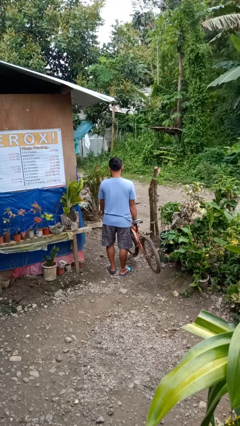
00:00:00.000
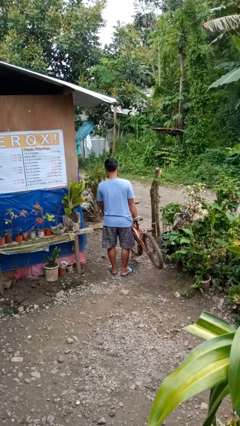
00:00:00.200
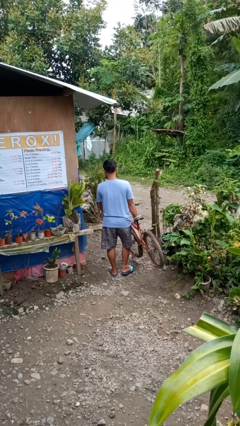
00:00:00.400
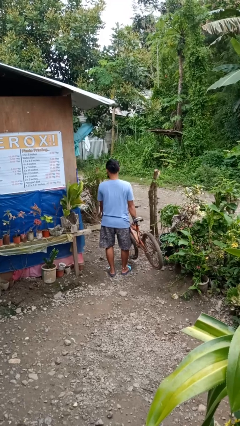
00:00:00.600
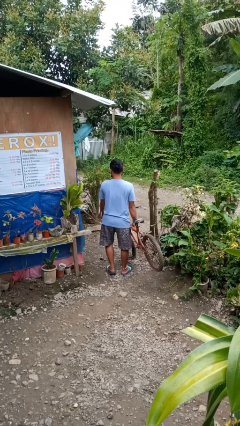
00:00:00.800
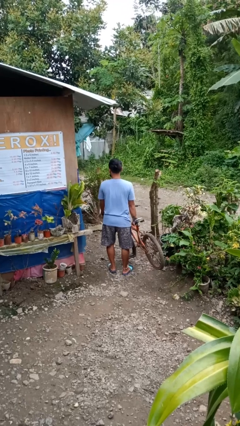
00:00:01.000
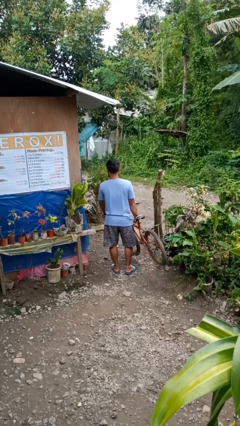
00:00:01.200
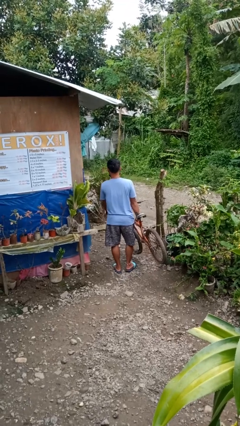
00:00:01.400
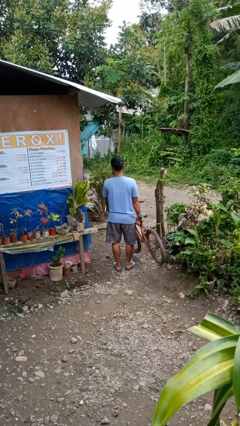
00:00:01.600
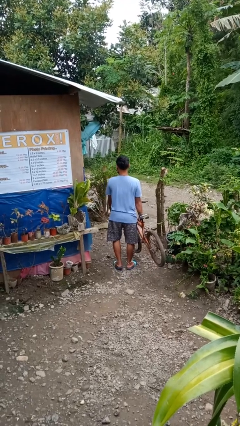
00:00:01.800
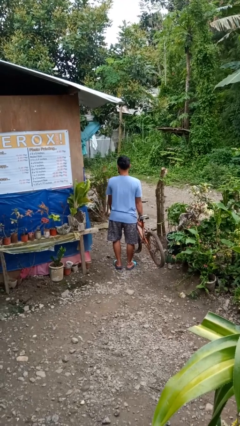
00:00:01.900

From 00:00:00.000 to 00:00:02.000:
person carries bicycle

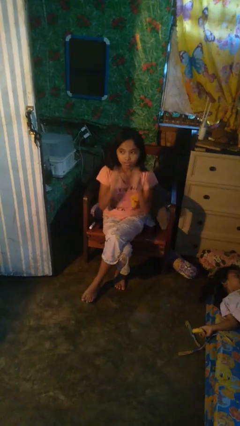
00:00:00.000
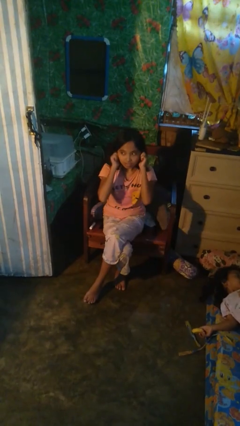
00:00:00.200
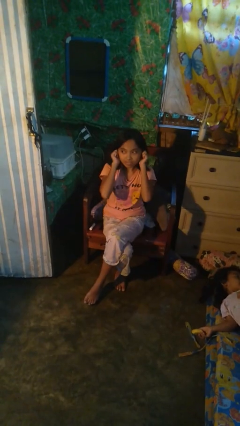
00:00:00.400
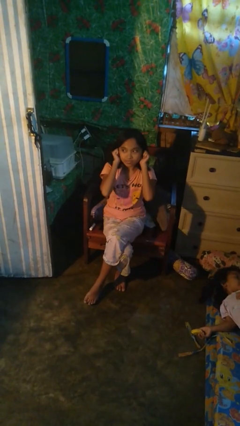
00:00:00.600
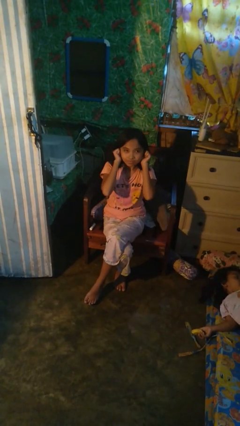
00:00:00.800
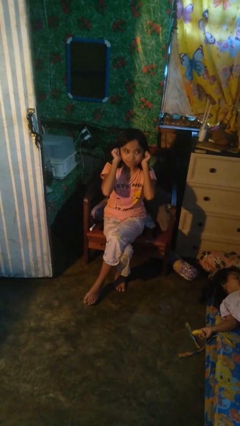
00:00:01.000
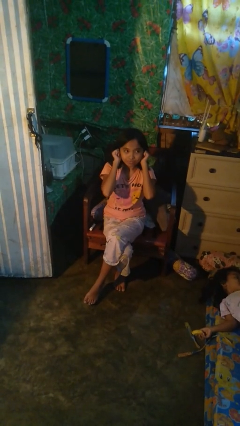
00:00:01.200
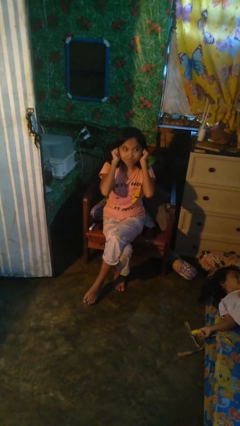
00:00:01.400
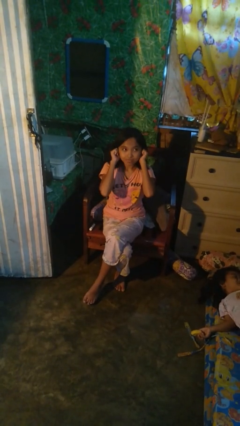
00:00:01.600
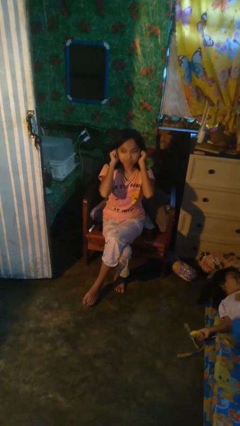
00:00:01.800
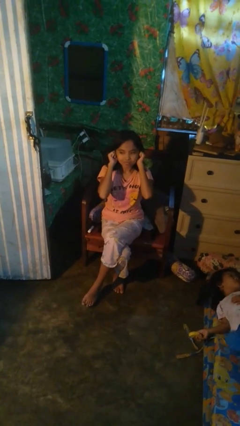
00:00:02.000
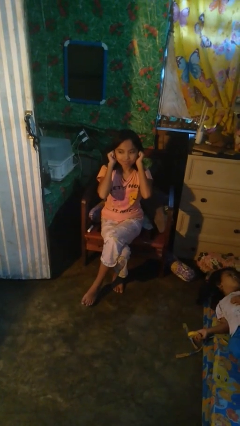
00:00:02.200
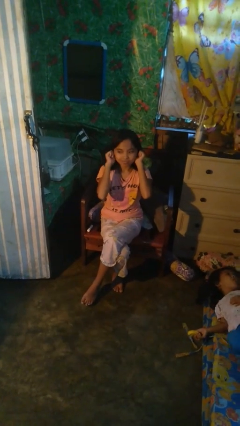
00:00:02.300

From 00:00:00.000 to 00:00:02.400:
person puts fingers in ear

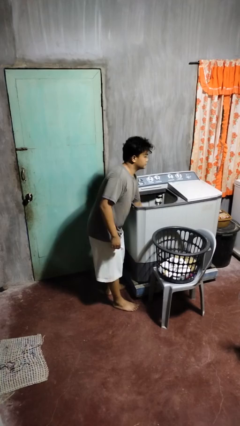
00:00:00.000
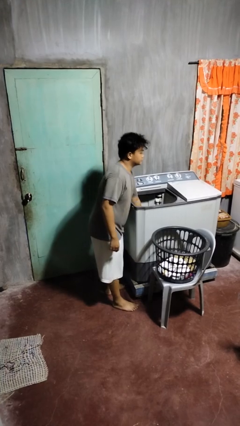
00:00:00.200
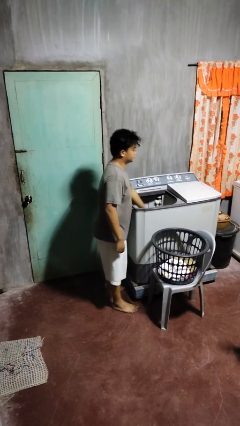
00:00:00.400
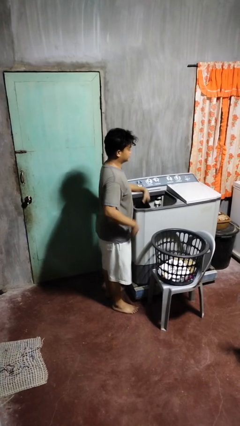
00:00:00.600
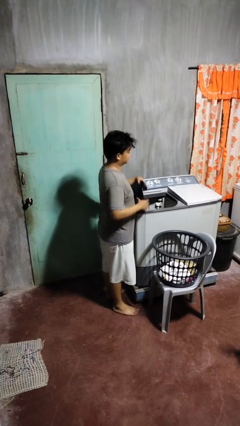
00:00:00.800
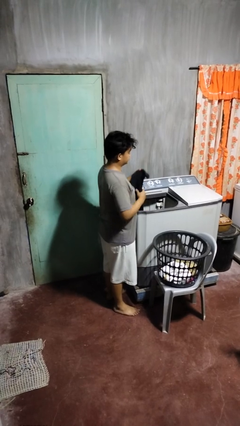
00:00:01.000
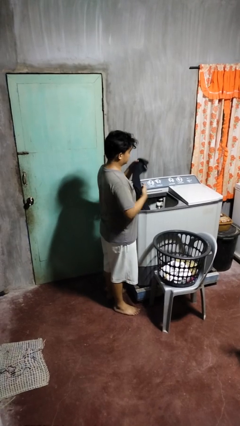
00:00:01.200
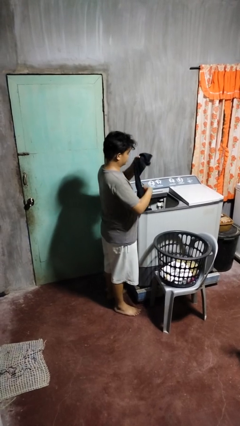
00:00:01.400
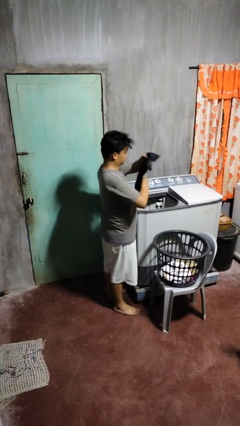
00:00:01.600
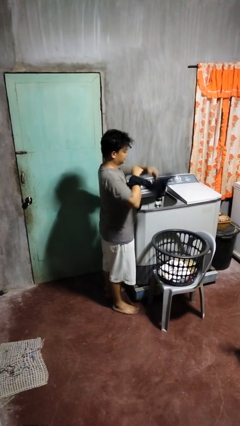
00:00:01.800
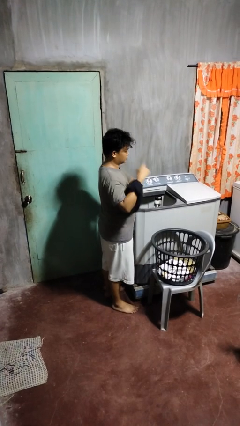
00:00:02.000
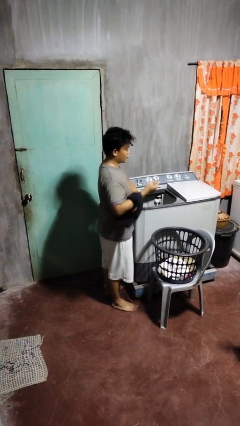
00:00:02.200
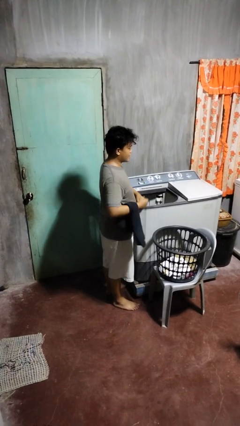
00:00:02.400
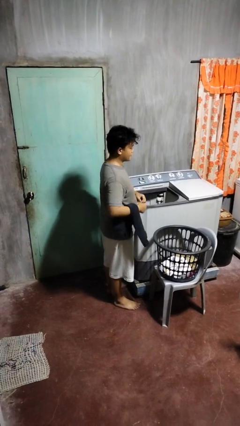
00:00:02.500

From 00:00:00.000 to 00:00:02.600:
person unloads clotheswasher

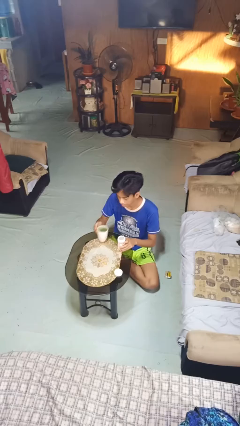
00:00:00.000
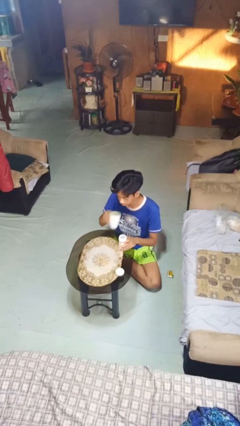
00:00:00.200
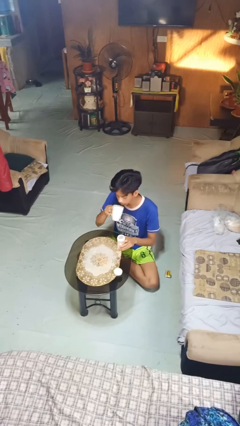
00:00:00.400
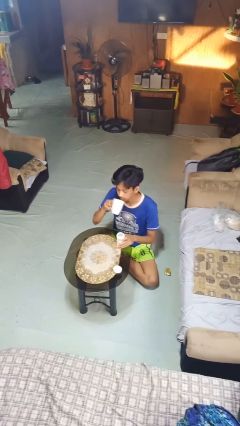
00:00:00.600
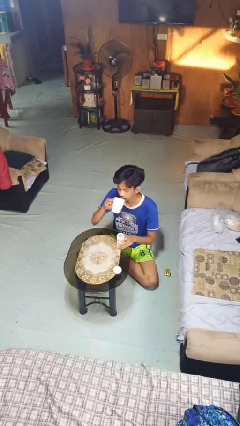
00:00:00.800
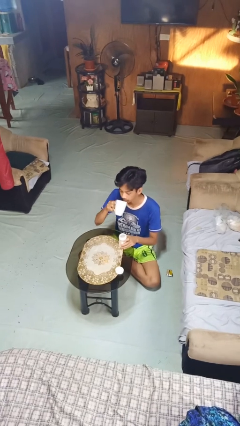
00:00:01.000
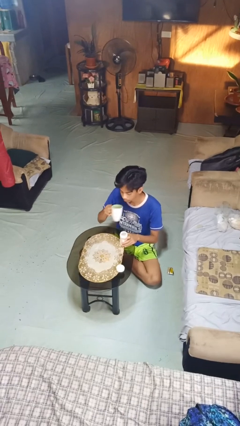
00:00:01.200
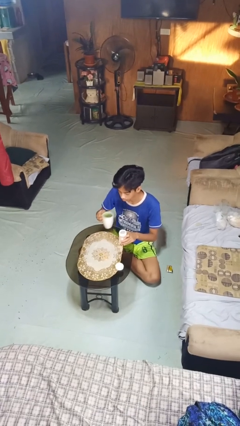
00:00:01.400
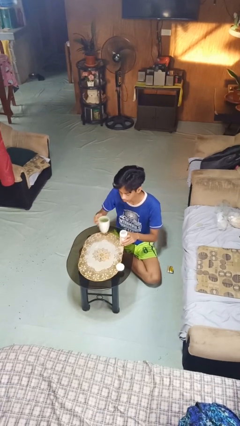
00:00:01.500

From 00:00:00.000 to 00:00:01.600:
person drinks from cup

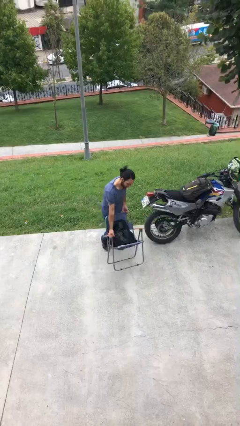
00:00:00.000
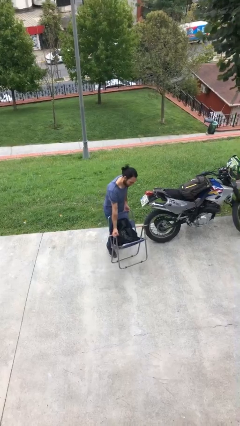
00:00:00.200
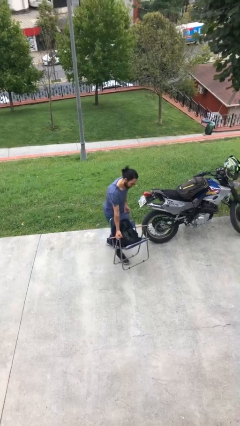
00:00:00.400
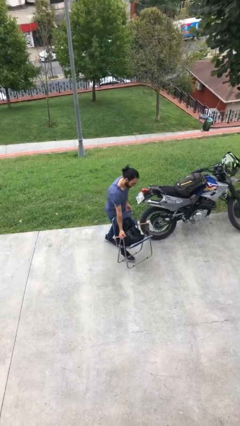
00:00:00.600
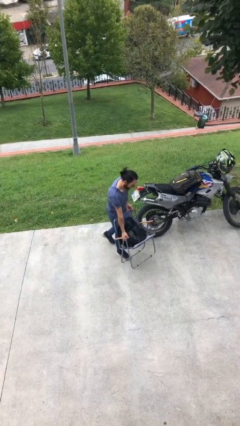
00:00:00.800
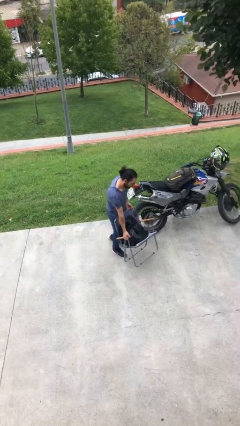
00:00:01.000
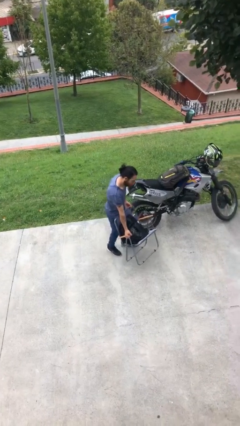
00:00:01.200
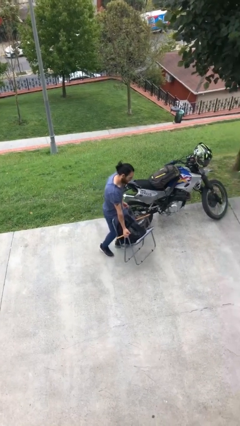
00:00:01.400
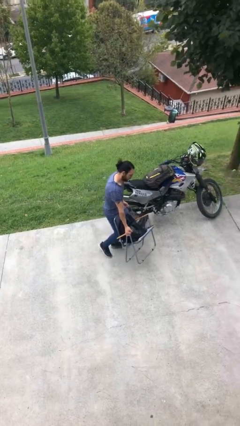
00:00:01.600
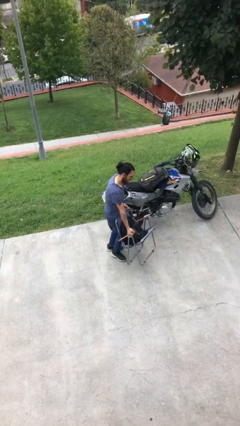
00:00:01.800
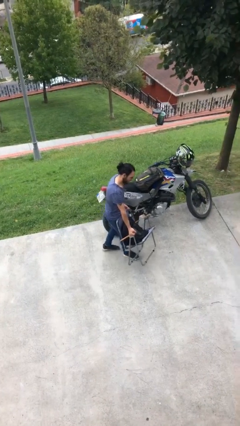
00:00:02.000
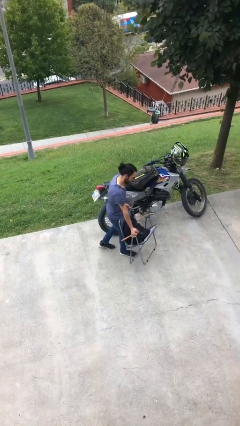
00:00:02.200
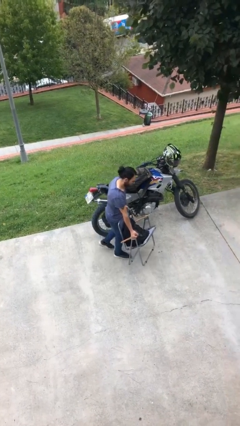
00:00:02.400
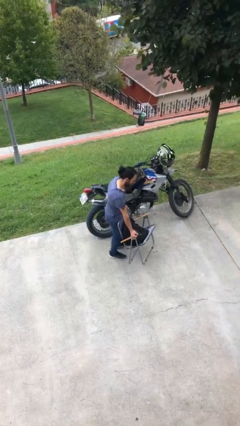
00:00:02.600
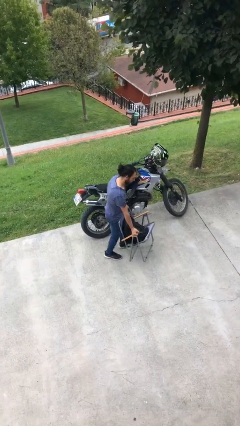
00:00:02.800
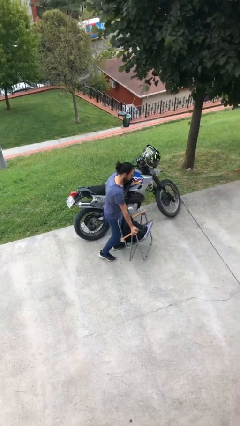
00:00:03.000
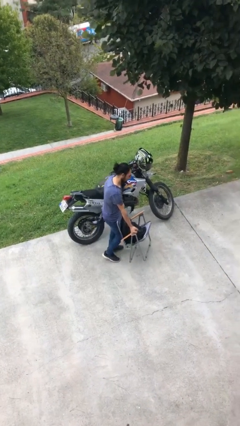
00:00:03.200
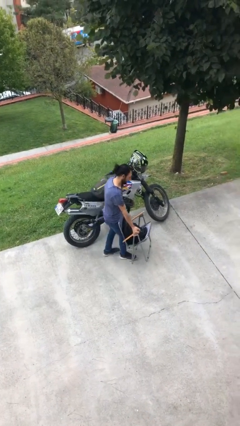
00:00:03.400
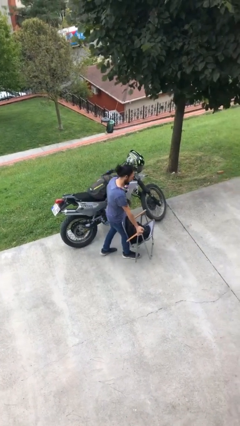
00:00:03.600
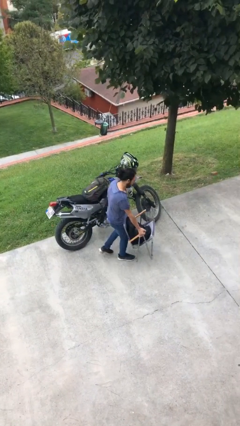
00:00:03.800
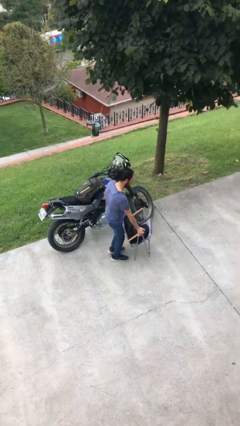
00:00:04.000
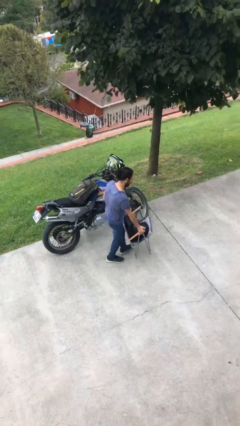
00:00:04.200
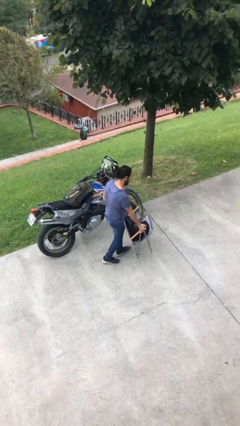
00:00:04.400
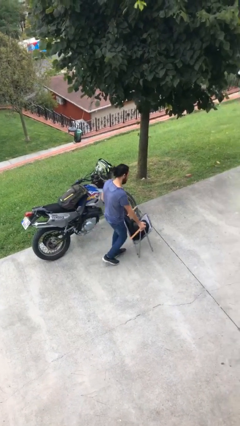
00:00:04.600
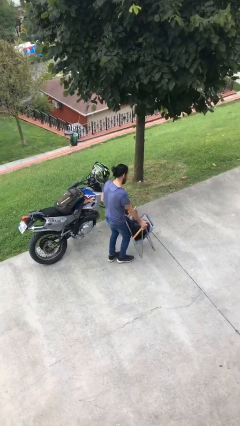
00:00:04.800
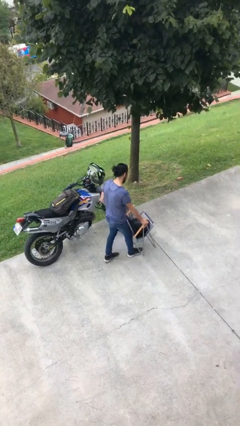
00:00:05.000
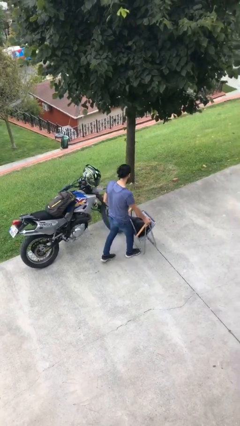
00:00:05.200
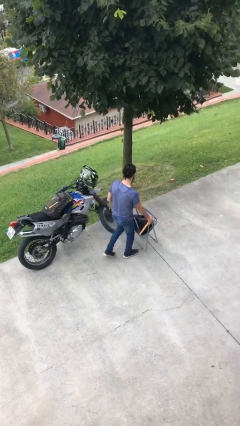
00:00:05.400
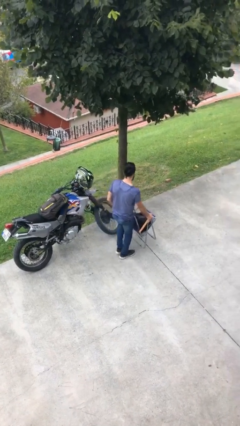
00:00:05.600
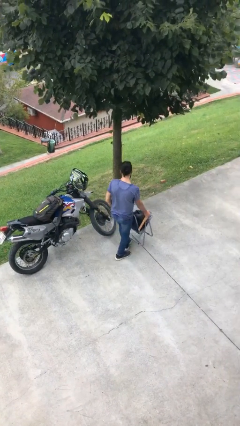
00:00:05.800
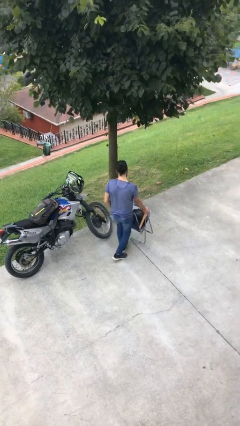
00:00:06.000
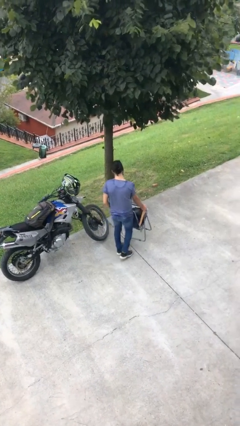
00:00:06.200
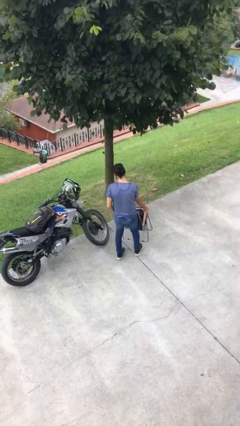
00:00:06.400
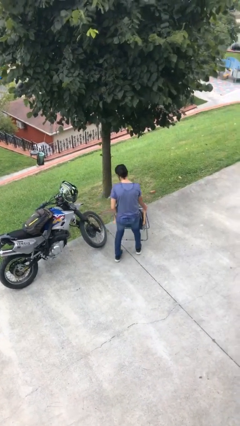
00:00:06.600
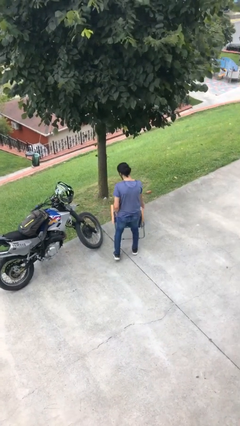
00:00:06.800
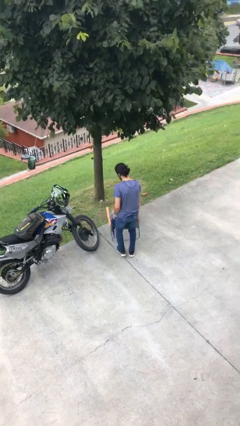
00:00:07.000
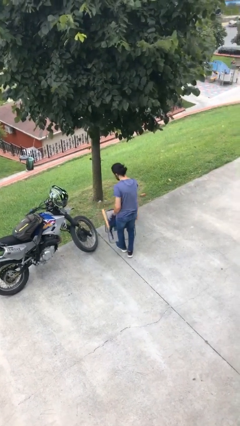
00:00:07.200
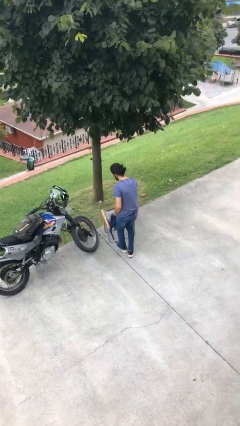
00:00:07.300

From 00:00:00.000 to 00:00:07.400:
person carries heavy object

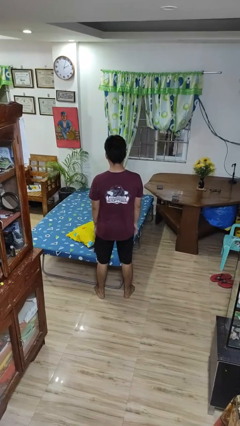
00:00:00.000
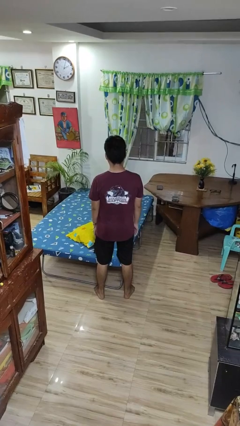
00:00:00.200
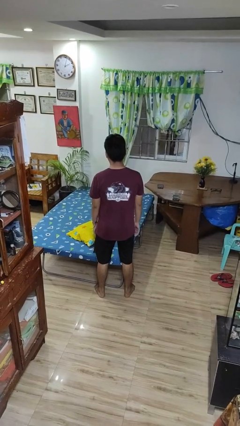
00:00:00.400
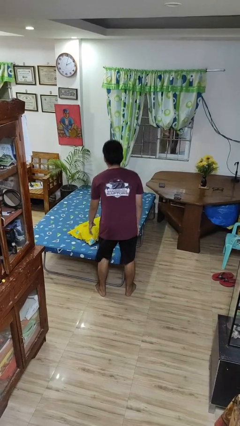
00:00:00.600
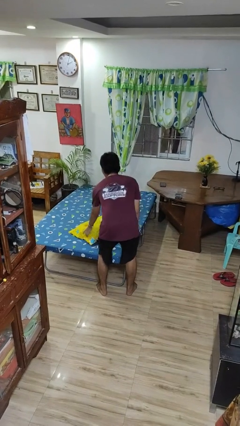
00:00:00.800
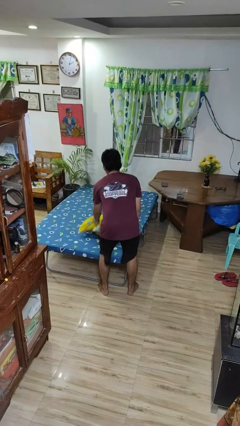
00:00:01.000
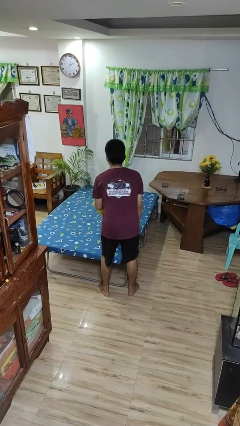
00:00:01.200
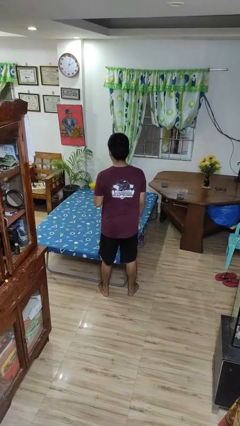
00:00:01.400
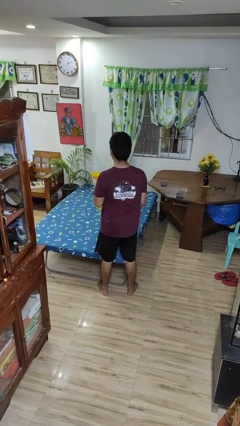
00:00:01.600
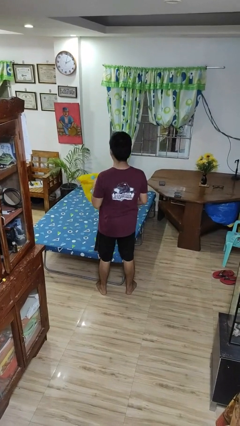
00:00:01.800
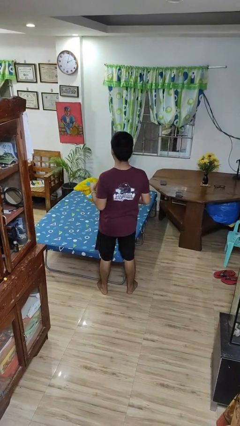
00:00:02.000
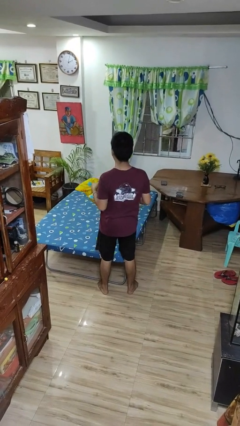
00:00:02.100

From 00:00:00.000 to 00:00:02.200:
person picks up object from bed
